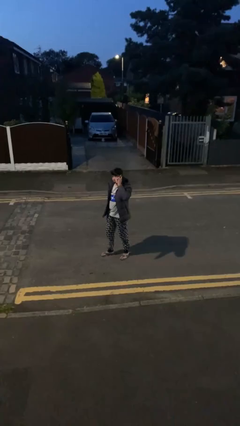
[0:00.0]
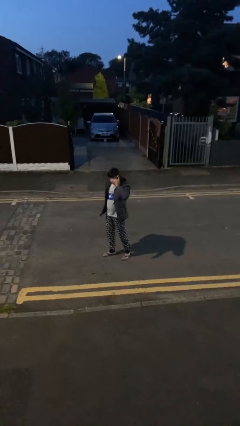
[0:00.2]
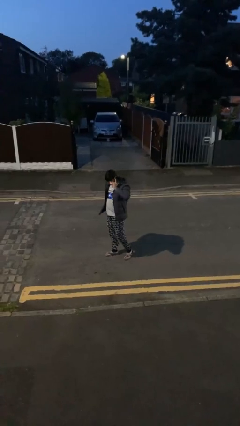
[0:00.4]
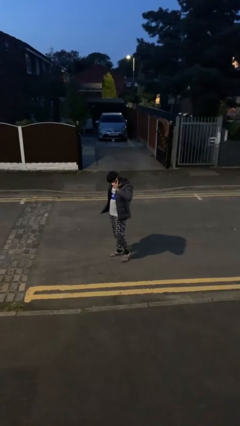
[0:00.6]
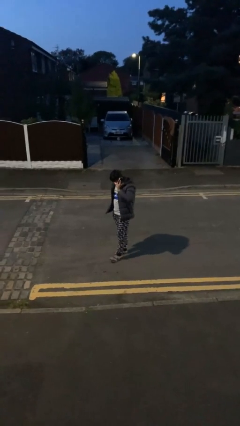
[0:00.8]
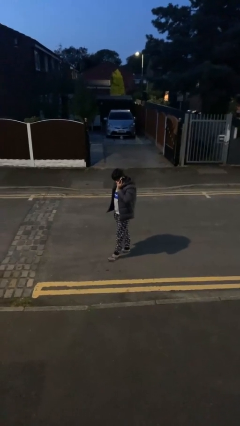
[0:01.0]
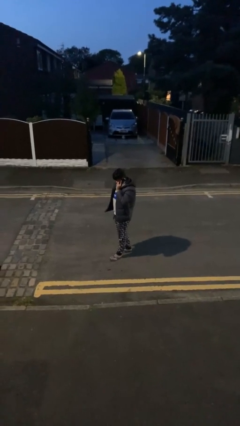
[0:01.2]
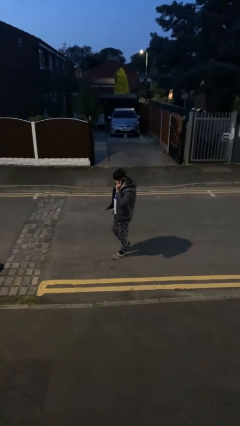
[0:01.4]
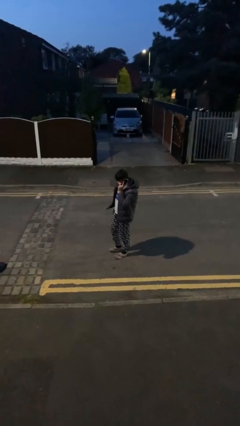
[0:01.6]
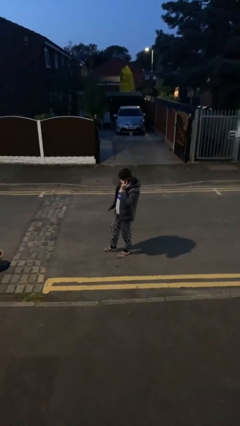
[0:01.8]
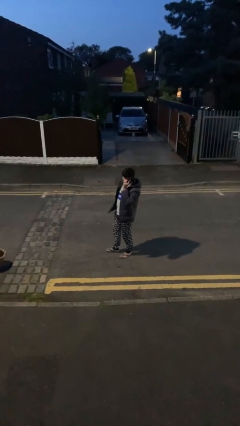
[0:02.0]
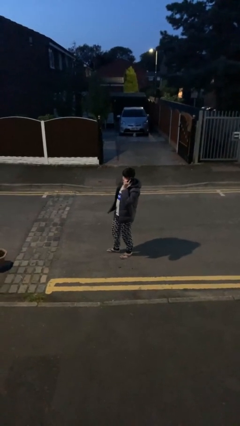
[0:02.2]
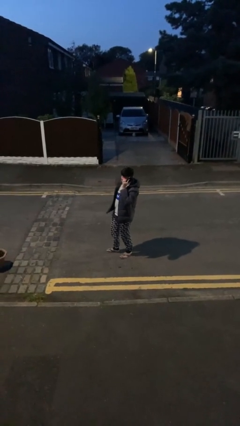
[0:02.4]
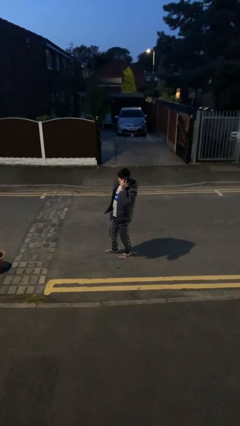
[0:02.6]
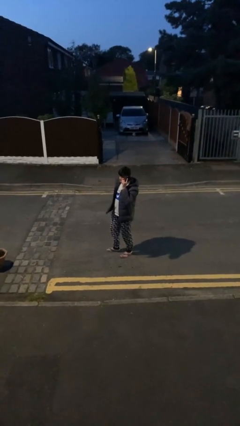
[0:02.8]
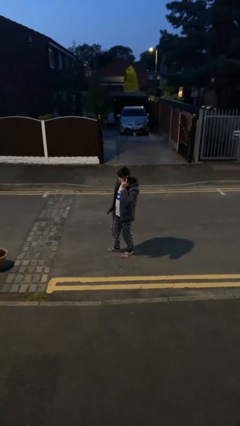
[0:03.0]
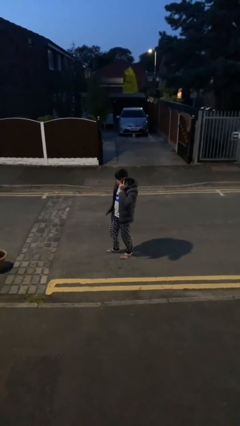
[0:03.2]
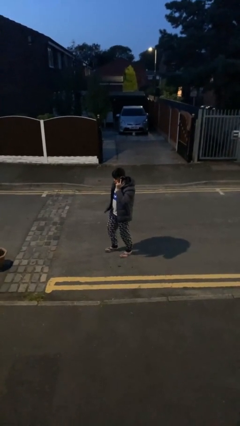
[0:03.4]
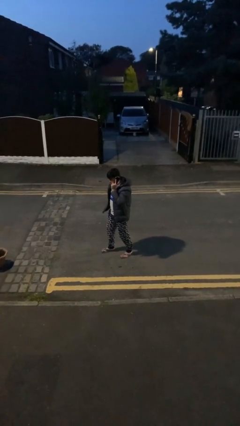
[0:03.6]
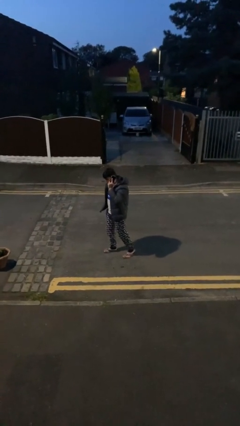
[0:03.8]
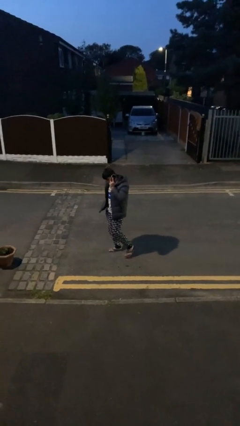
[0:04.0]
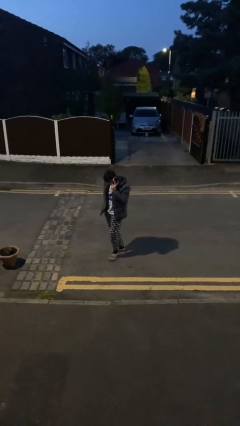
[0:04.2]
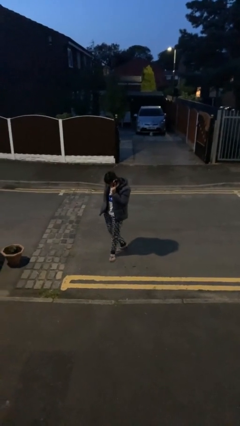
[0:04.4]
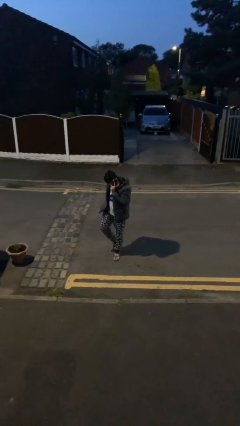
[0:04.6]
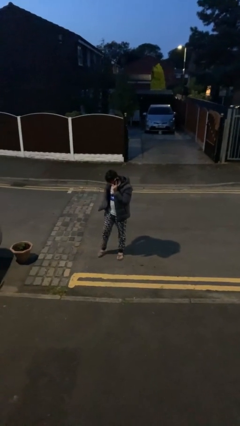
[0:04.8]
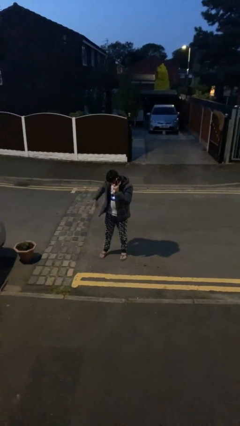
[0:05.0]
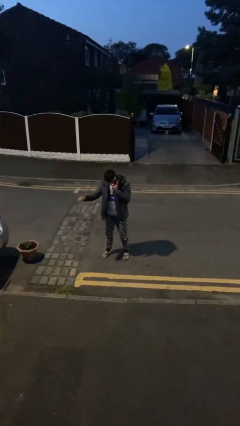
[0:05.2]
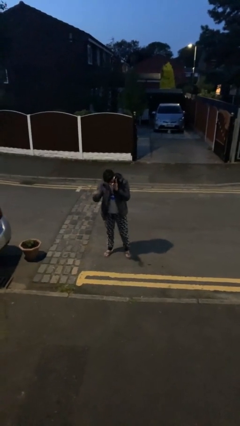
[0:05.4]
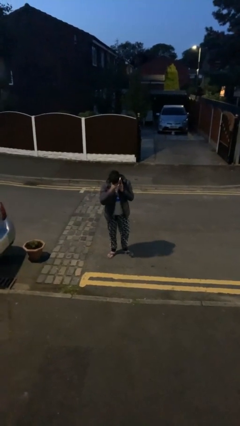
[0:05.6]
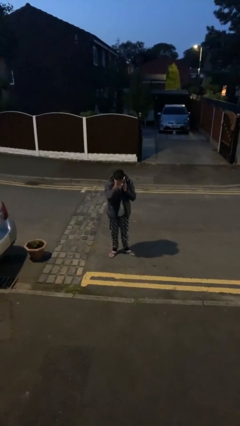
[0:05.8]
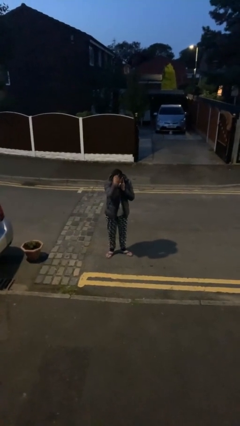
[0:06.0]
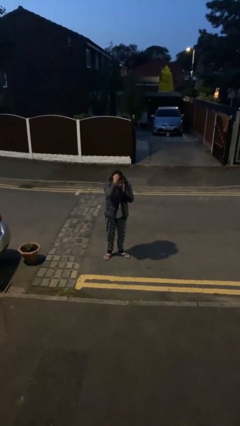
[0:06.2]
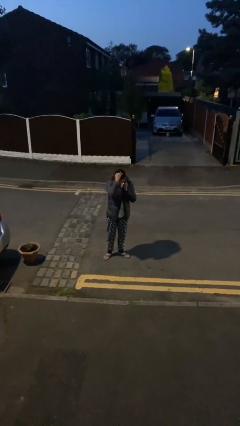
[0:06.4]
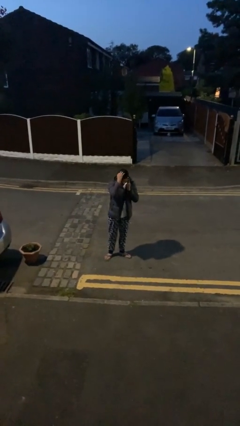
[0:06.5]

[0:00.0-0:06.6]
person talks on phone

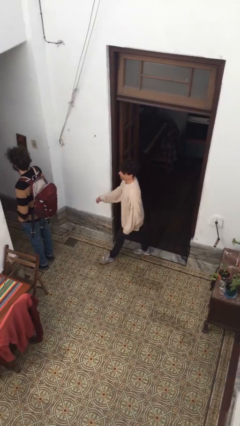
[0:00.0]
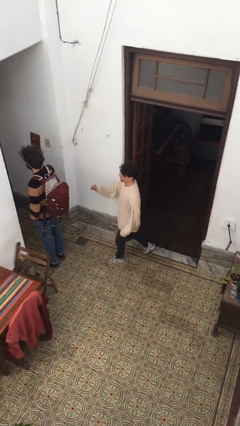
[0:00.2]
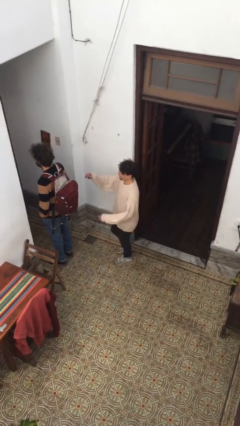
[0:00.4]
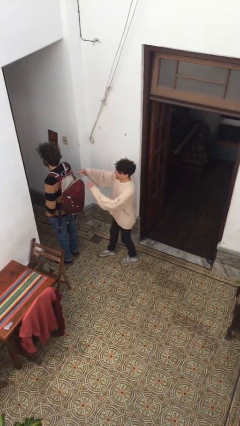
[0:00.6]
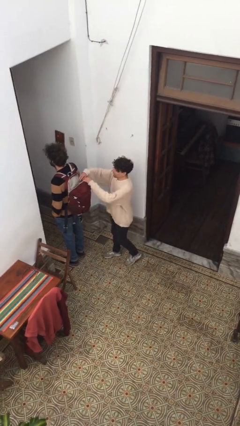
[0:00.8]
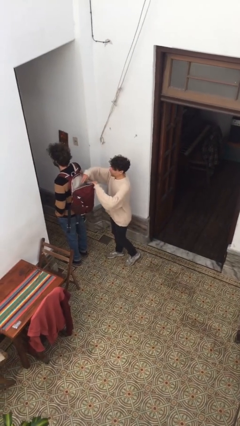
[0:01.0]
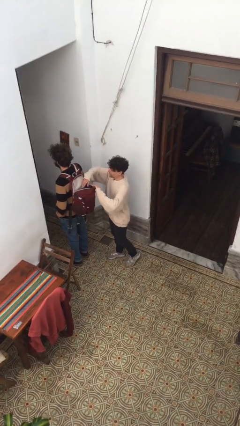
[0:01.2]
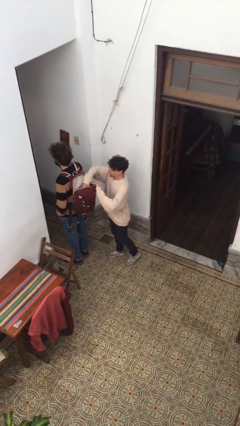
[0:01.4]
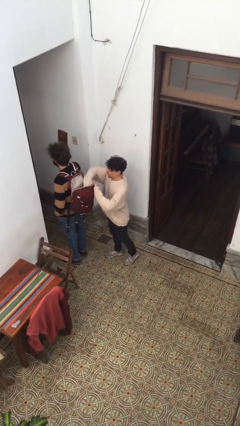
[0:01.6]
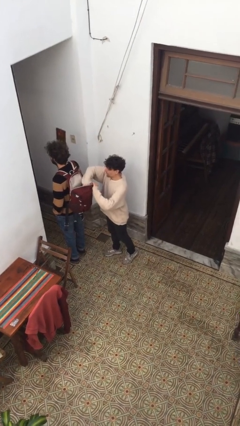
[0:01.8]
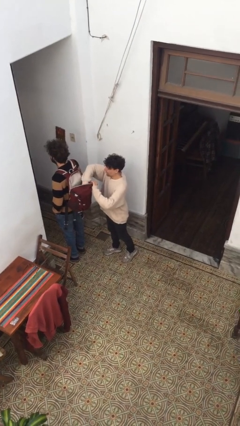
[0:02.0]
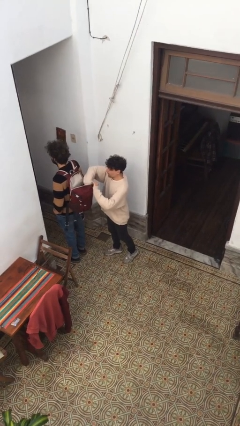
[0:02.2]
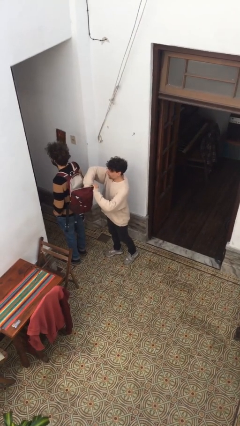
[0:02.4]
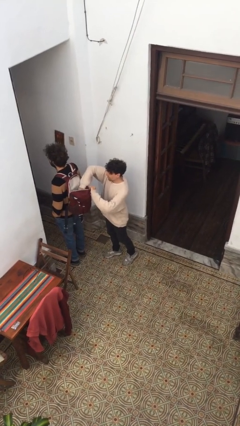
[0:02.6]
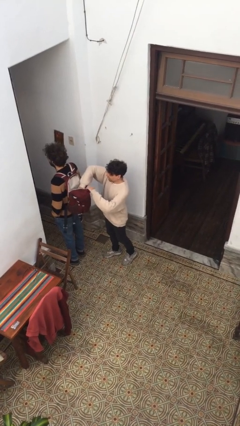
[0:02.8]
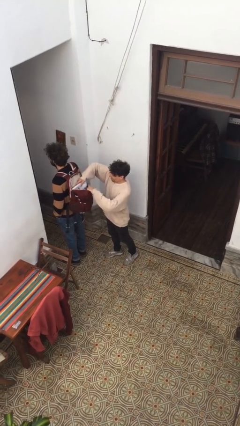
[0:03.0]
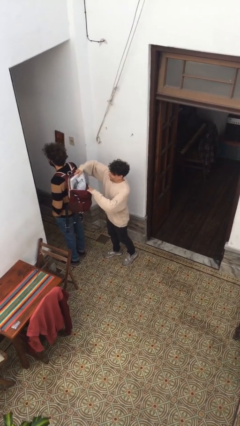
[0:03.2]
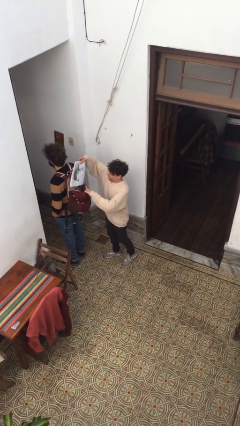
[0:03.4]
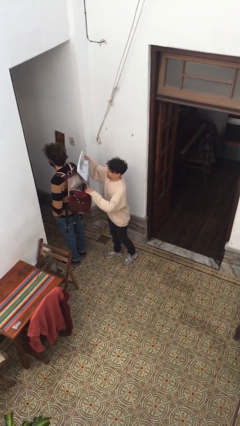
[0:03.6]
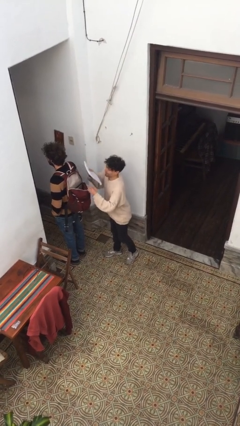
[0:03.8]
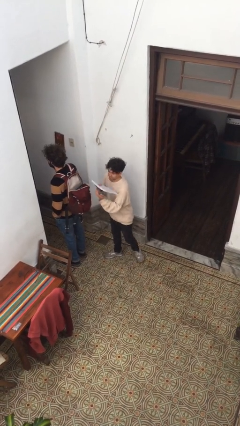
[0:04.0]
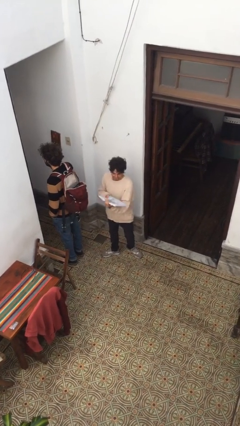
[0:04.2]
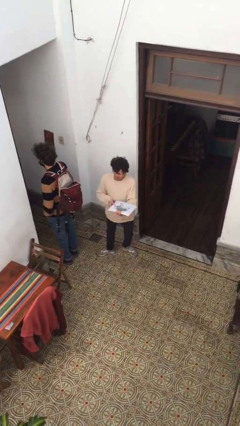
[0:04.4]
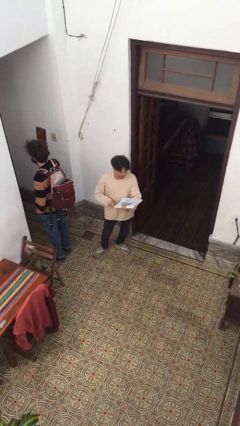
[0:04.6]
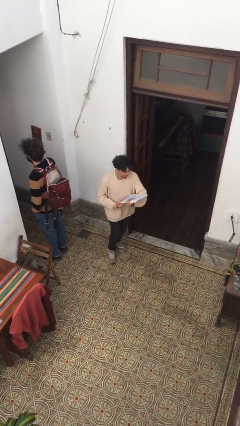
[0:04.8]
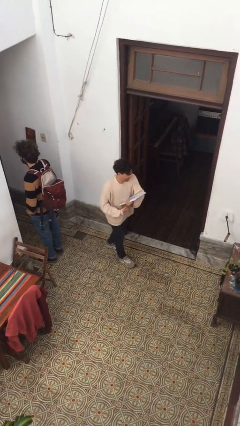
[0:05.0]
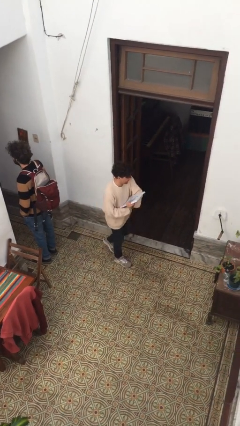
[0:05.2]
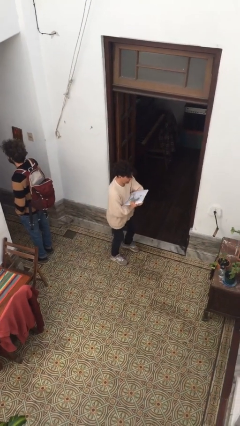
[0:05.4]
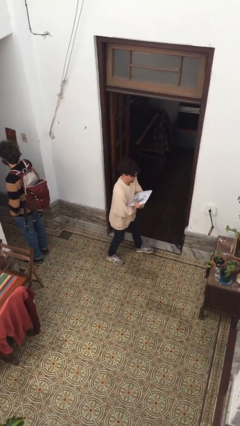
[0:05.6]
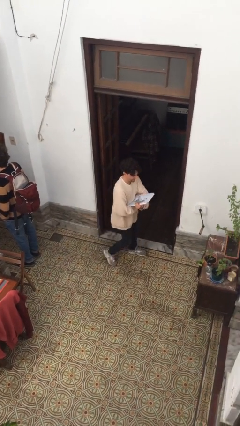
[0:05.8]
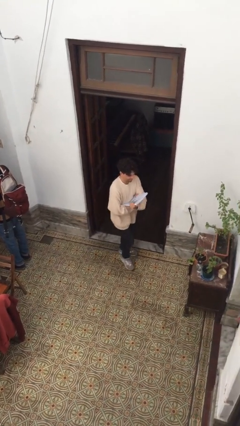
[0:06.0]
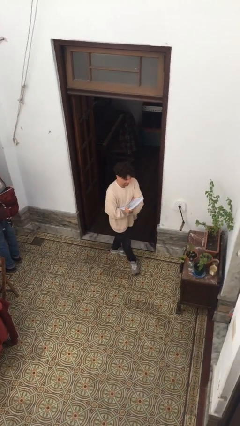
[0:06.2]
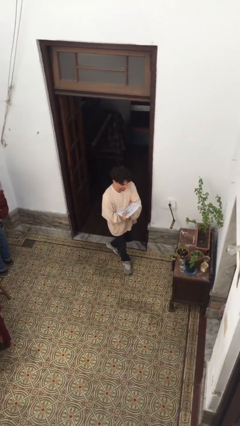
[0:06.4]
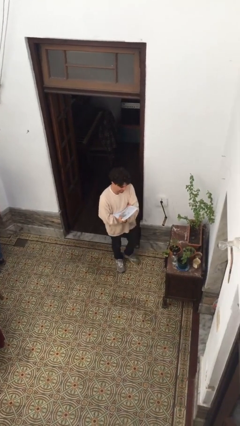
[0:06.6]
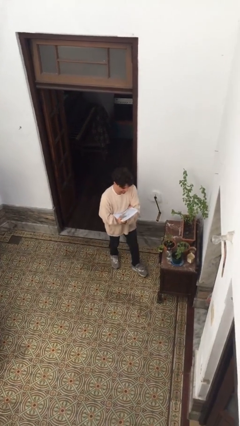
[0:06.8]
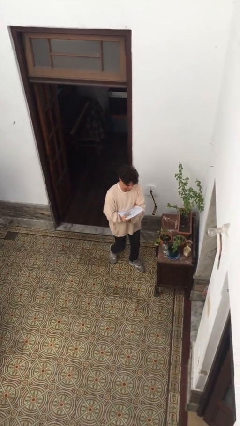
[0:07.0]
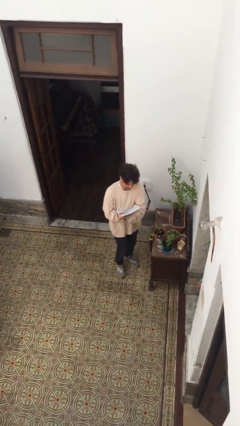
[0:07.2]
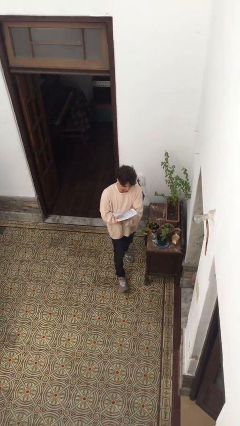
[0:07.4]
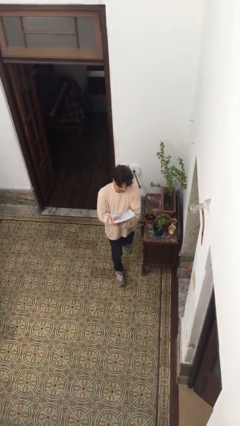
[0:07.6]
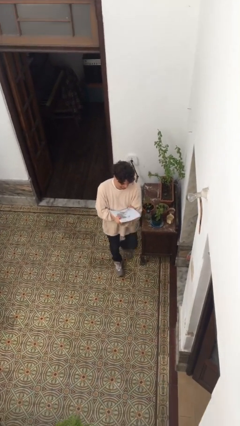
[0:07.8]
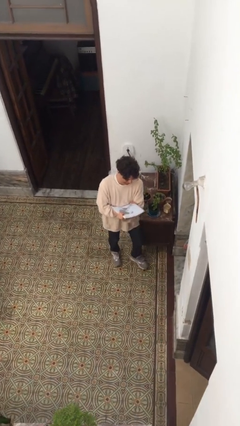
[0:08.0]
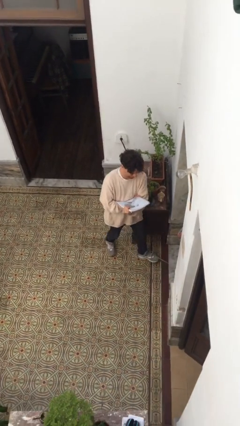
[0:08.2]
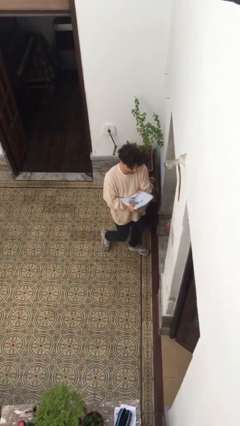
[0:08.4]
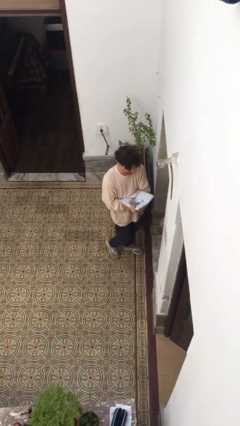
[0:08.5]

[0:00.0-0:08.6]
person steals object from person

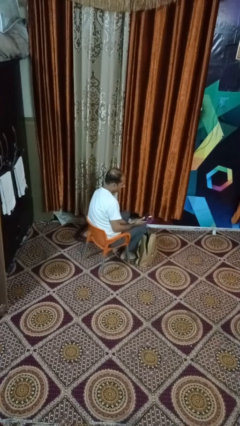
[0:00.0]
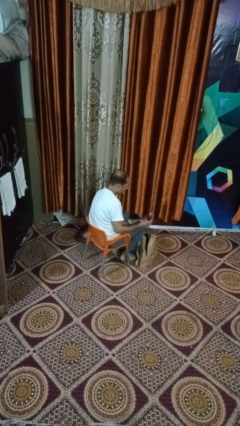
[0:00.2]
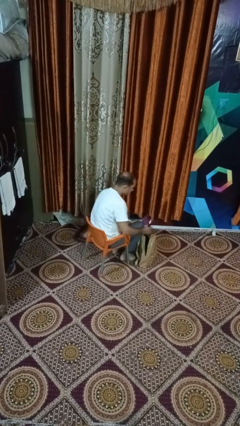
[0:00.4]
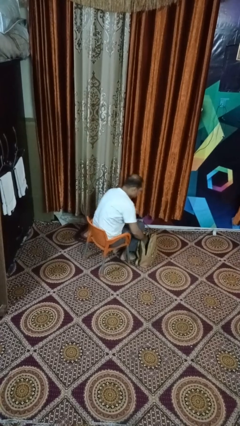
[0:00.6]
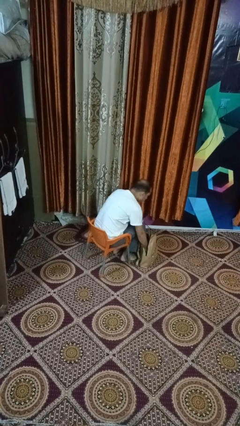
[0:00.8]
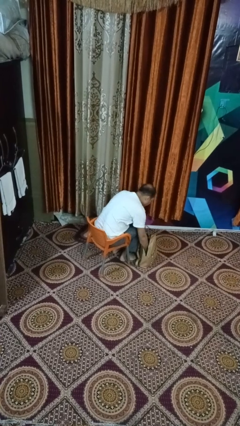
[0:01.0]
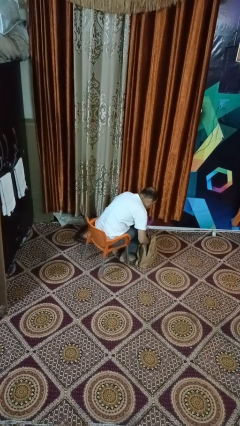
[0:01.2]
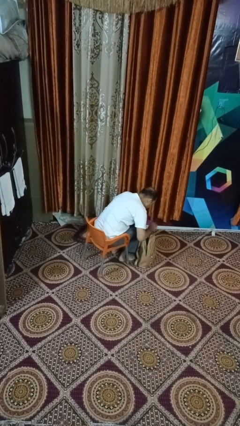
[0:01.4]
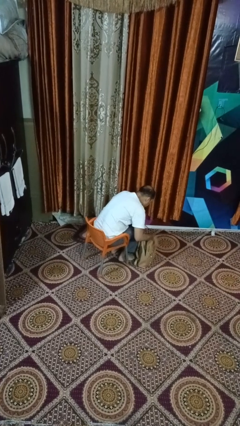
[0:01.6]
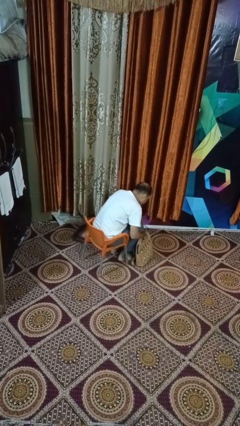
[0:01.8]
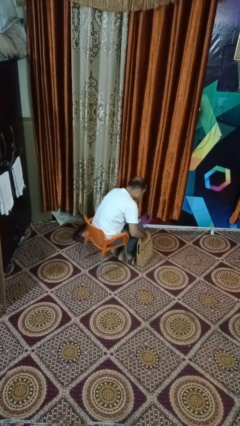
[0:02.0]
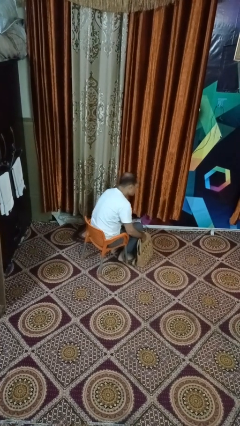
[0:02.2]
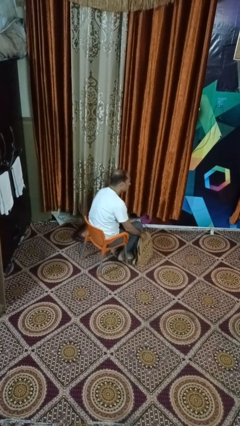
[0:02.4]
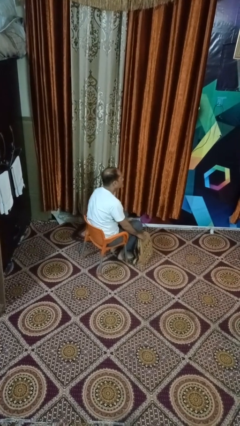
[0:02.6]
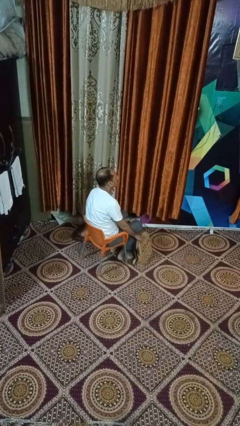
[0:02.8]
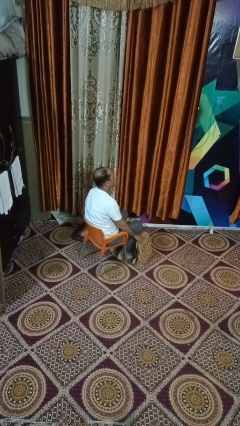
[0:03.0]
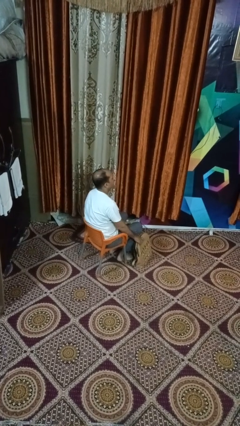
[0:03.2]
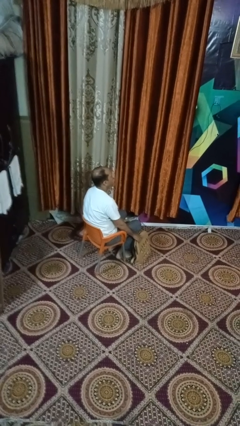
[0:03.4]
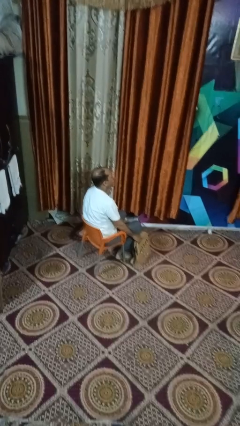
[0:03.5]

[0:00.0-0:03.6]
person puts object into purse
